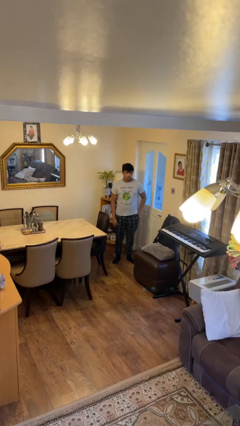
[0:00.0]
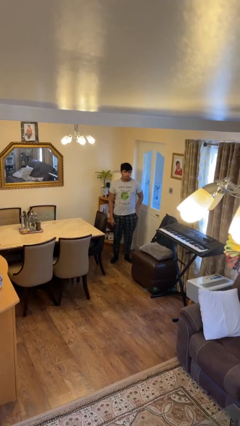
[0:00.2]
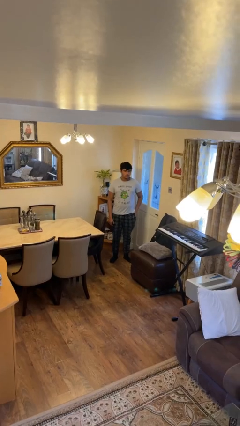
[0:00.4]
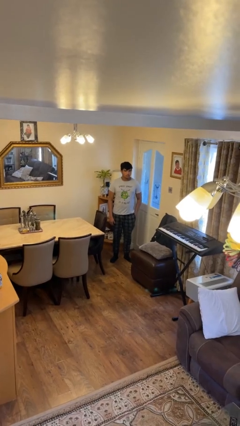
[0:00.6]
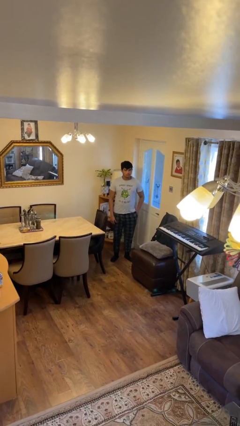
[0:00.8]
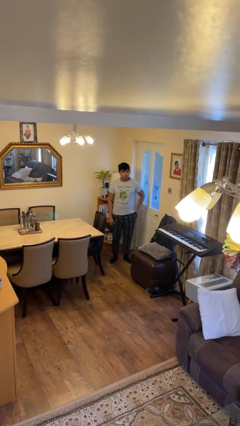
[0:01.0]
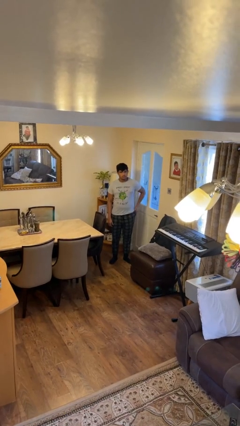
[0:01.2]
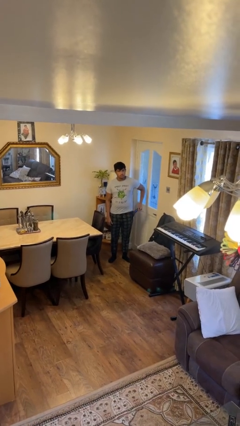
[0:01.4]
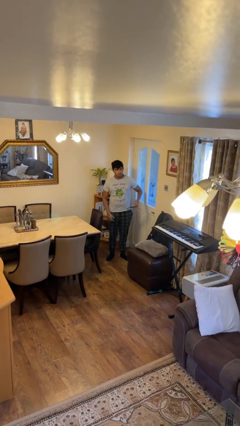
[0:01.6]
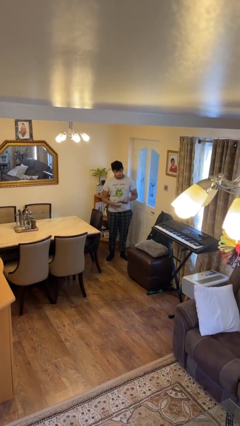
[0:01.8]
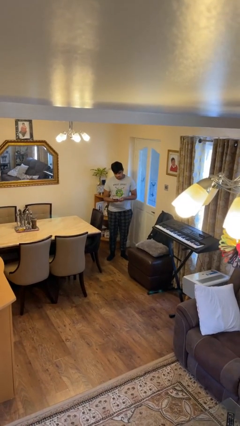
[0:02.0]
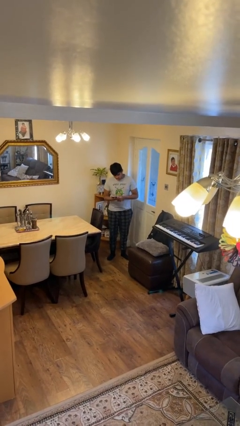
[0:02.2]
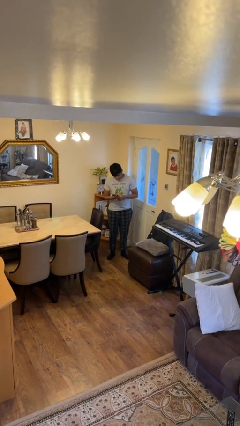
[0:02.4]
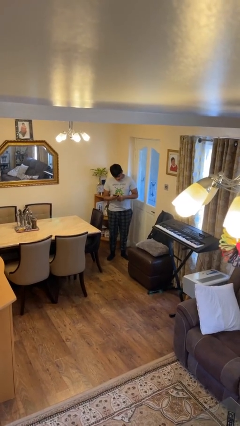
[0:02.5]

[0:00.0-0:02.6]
person takes phone from pocket

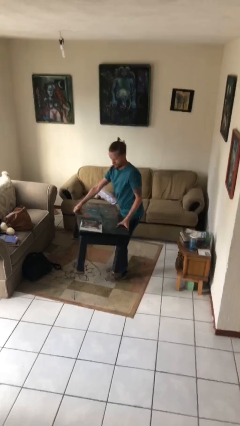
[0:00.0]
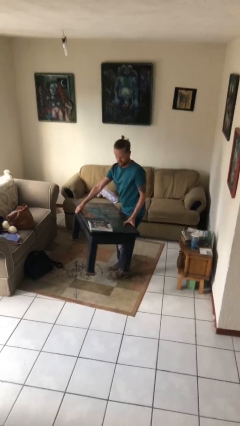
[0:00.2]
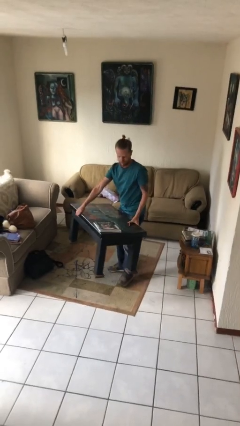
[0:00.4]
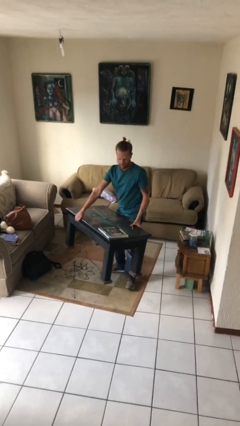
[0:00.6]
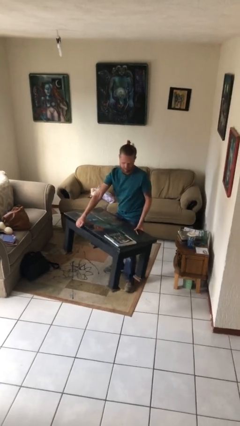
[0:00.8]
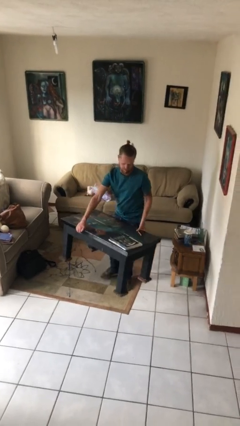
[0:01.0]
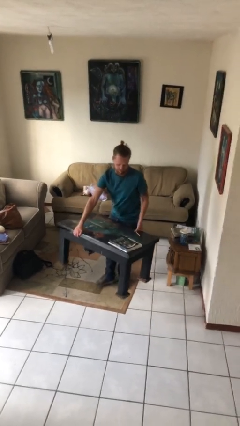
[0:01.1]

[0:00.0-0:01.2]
person carries heavy object

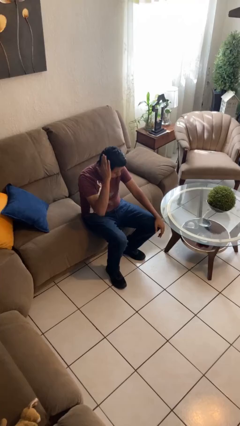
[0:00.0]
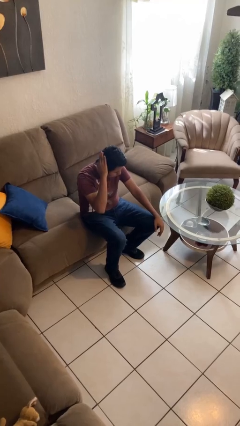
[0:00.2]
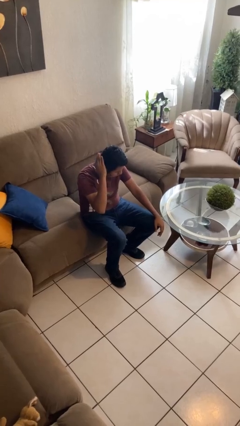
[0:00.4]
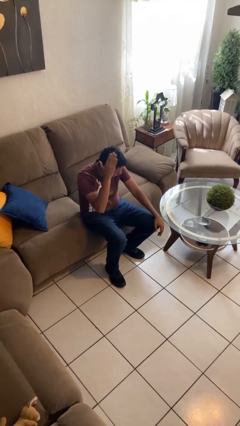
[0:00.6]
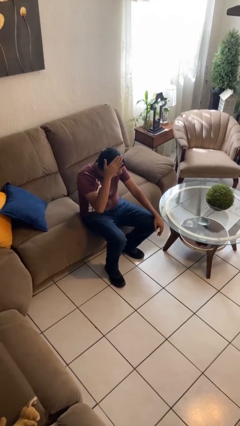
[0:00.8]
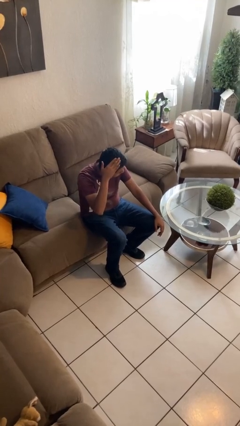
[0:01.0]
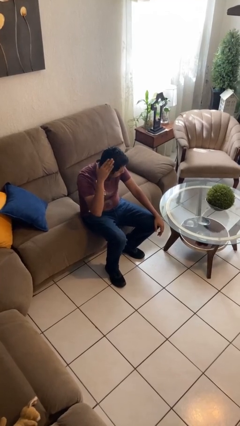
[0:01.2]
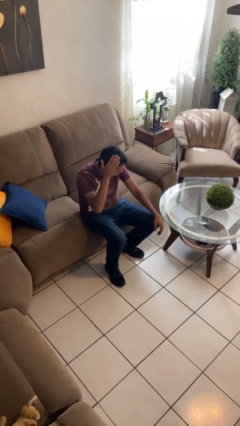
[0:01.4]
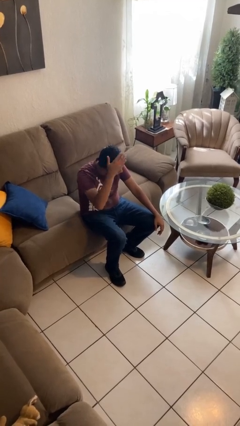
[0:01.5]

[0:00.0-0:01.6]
person pats head

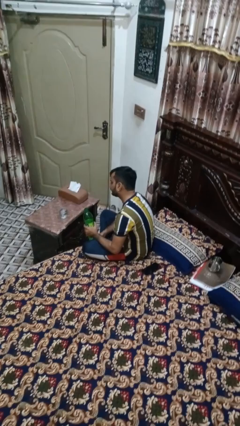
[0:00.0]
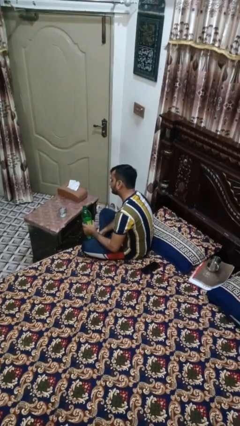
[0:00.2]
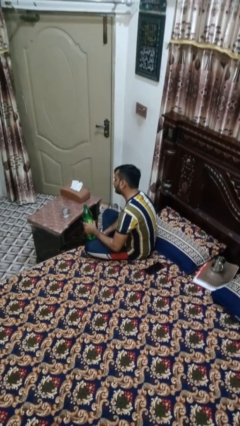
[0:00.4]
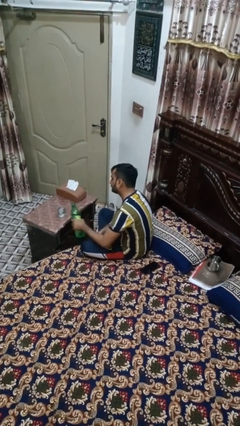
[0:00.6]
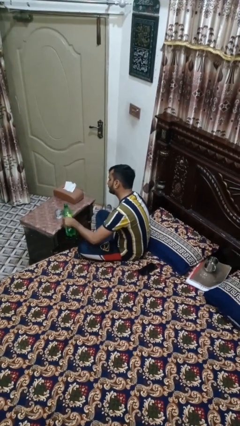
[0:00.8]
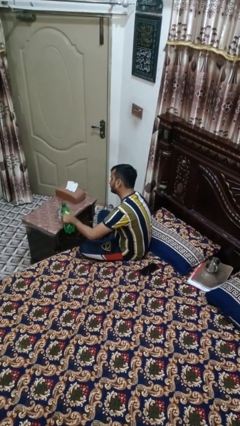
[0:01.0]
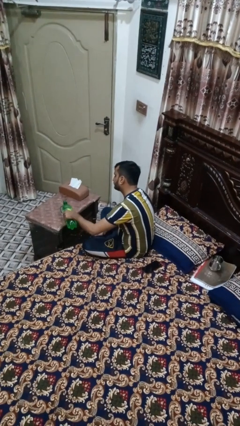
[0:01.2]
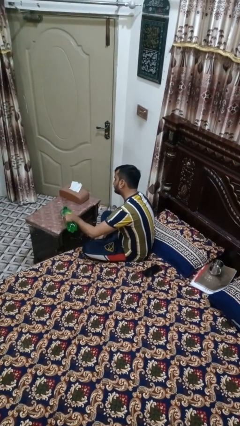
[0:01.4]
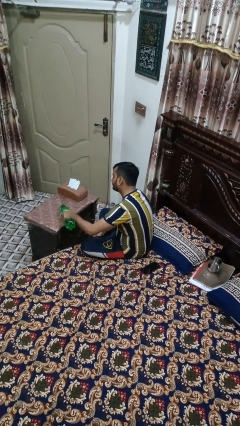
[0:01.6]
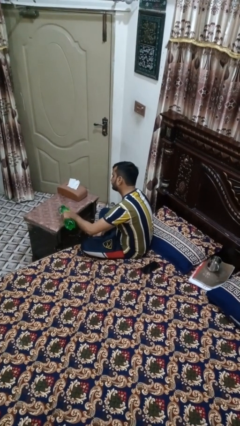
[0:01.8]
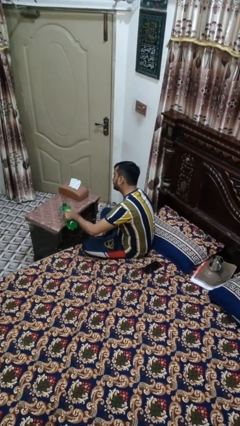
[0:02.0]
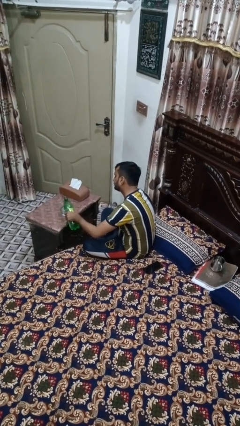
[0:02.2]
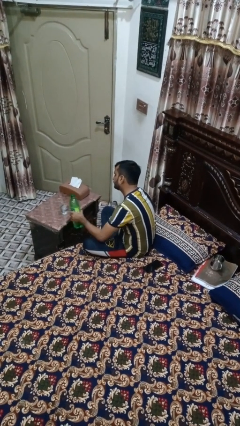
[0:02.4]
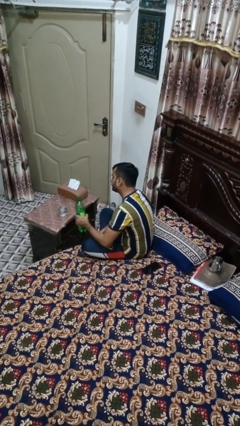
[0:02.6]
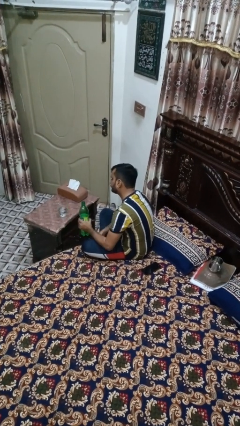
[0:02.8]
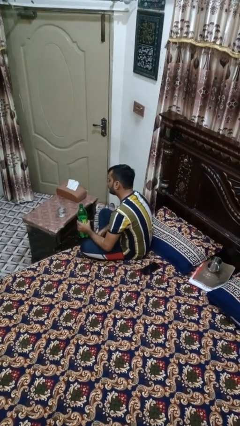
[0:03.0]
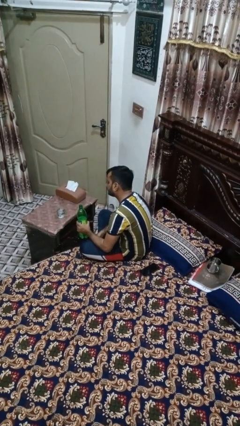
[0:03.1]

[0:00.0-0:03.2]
person pours liquid into cup

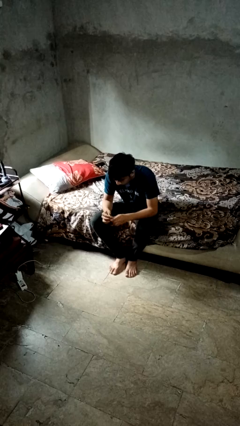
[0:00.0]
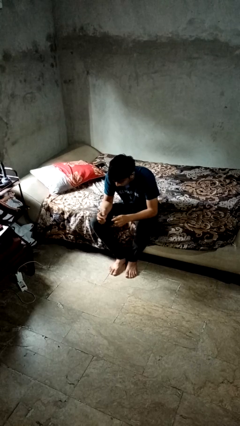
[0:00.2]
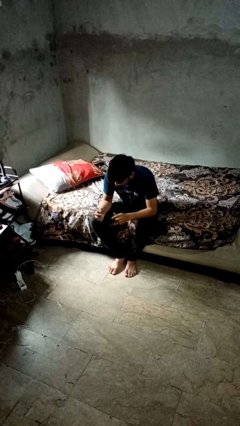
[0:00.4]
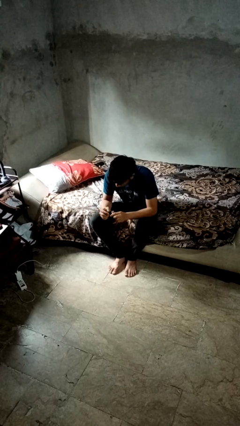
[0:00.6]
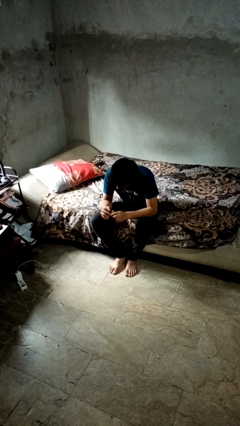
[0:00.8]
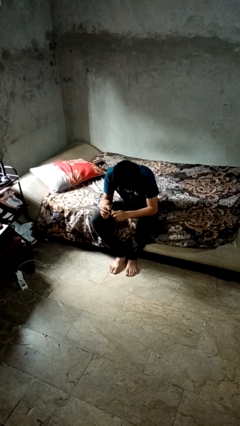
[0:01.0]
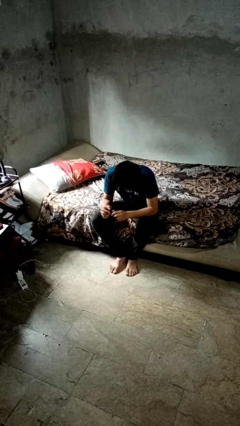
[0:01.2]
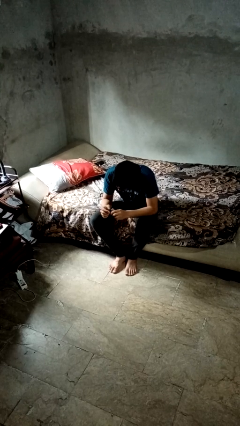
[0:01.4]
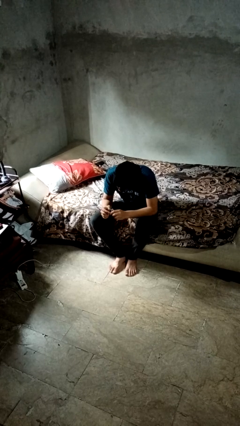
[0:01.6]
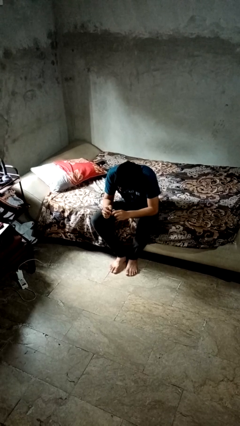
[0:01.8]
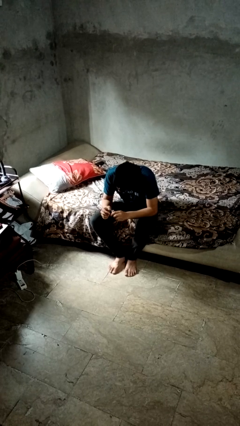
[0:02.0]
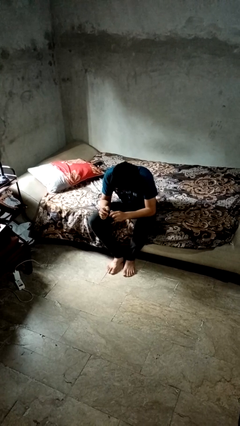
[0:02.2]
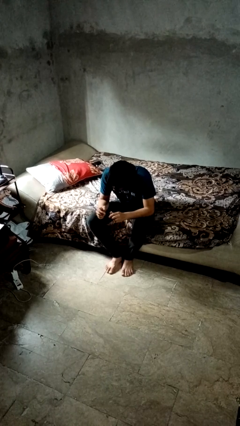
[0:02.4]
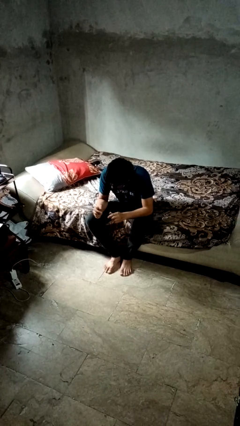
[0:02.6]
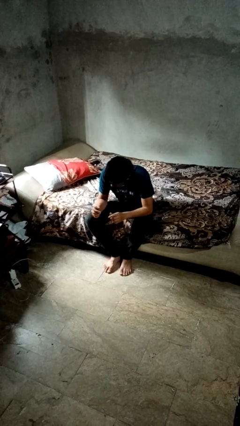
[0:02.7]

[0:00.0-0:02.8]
person files fingernails

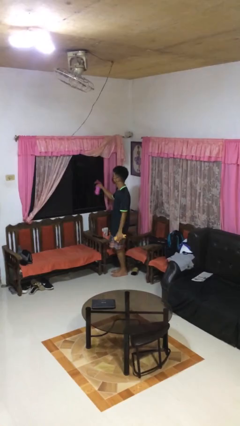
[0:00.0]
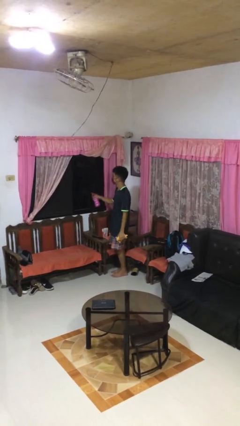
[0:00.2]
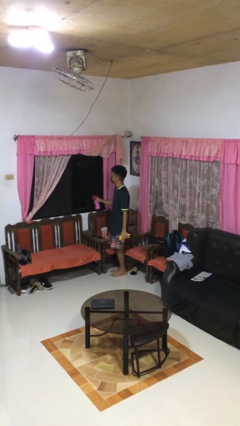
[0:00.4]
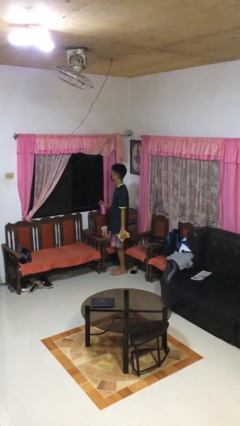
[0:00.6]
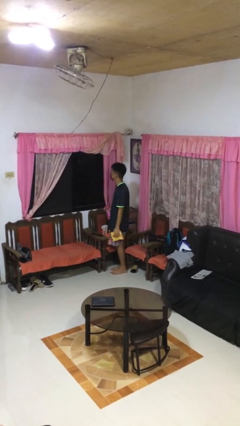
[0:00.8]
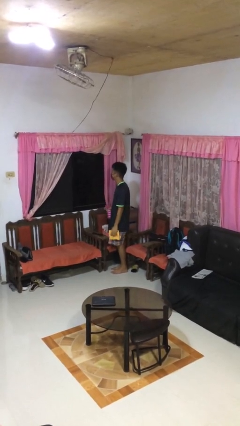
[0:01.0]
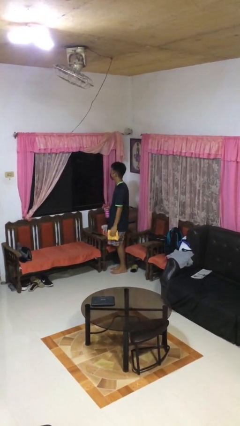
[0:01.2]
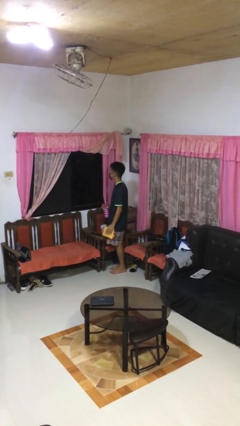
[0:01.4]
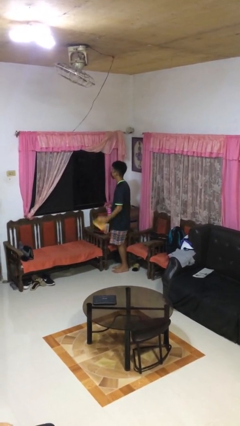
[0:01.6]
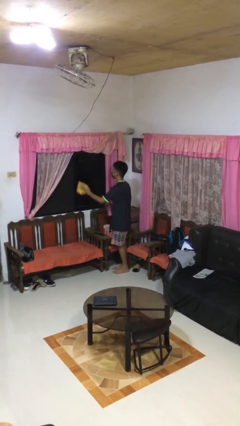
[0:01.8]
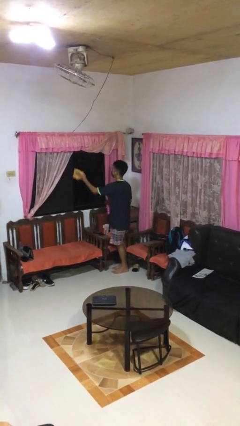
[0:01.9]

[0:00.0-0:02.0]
person sprays from bottle

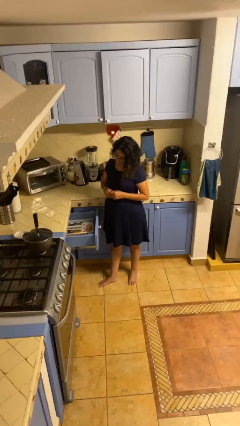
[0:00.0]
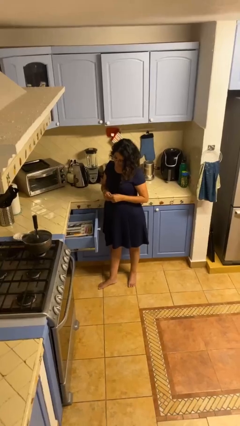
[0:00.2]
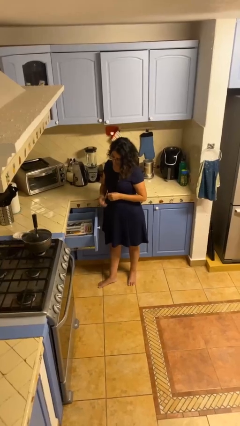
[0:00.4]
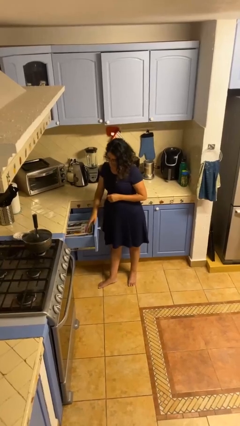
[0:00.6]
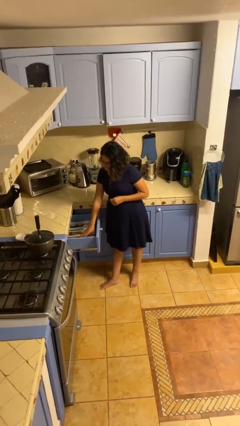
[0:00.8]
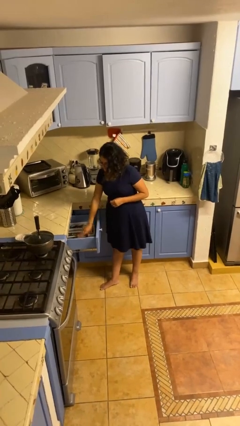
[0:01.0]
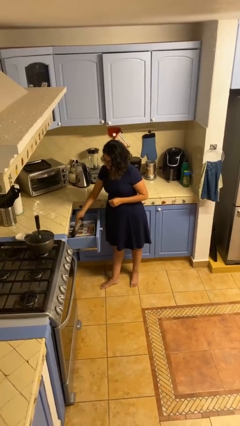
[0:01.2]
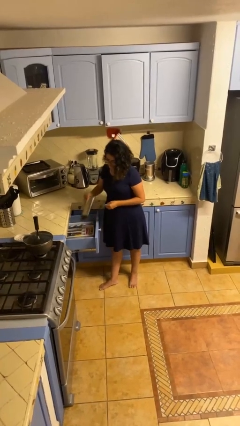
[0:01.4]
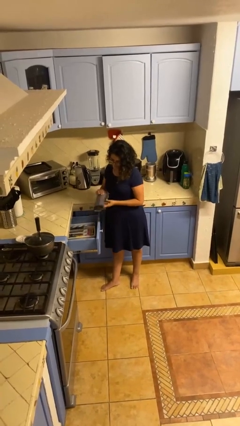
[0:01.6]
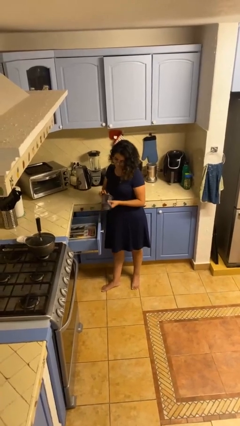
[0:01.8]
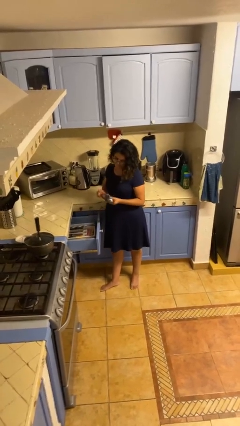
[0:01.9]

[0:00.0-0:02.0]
person takes object from kitchen drawer

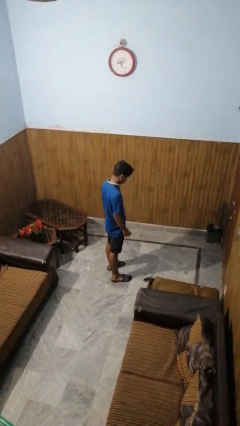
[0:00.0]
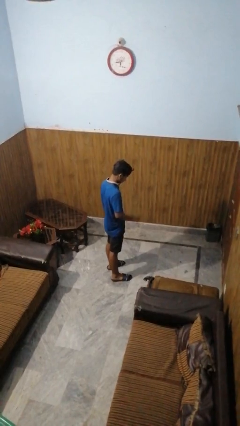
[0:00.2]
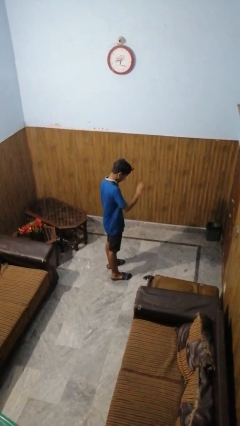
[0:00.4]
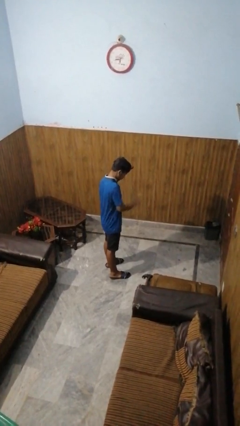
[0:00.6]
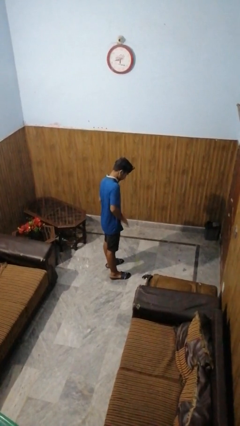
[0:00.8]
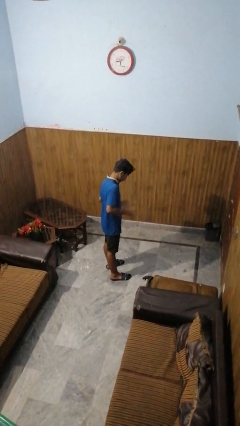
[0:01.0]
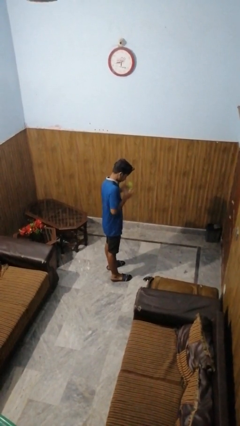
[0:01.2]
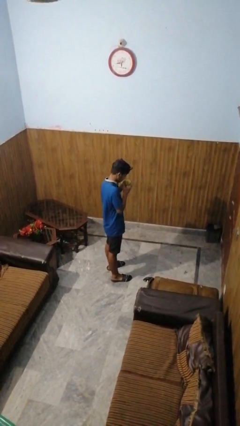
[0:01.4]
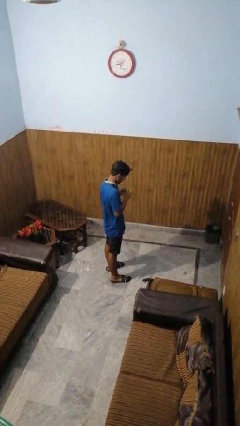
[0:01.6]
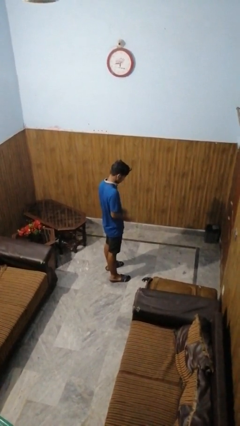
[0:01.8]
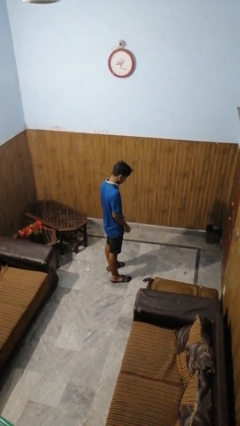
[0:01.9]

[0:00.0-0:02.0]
person bounces ball on floor
